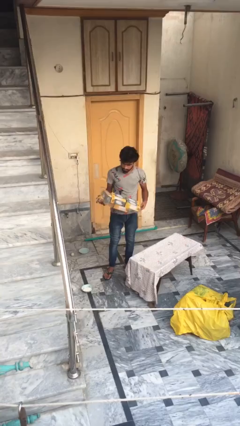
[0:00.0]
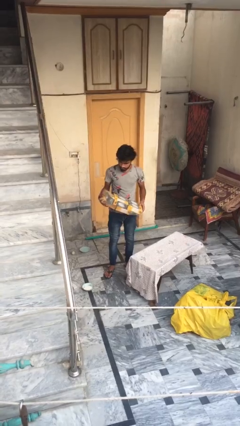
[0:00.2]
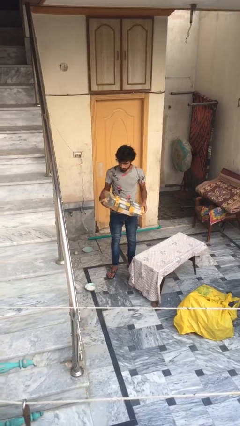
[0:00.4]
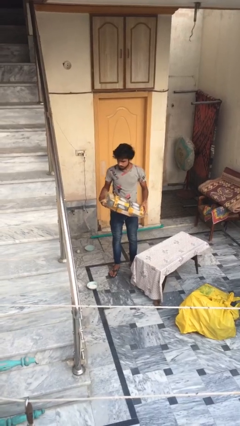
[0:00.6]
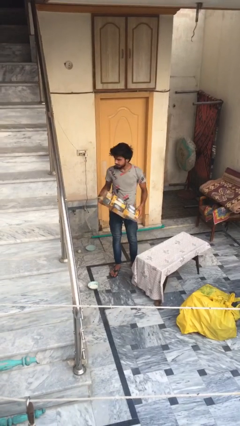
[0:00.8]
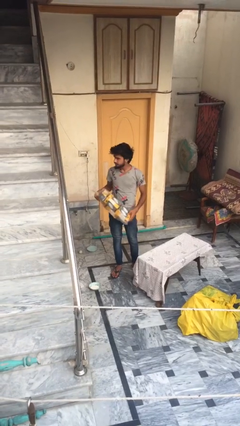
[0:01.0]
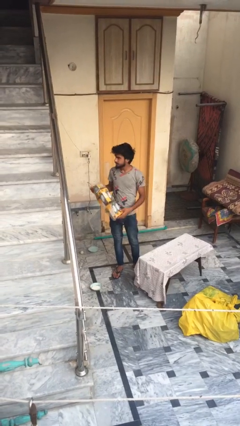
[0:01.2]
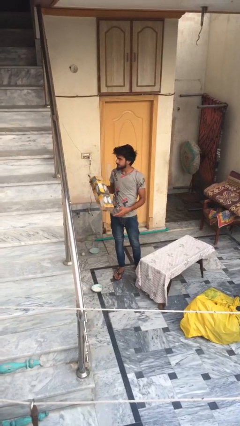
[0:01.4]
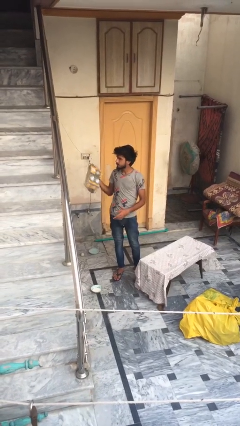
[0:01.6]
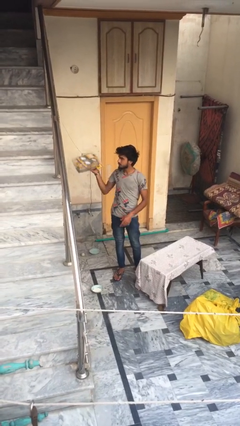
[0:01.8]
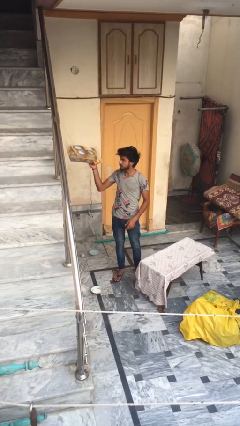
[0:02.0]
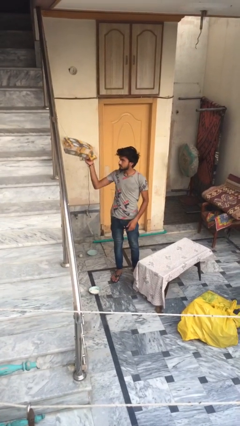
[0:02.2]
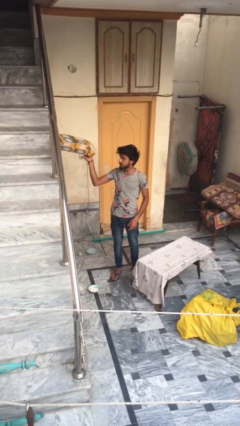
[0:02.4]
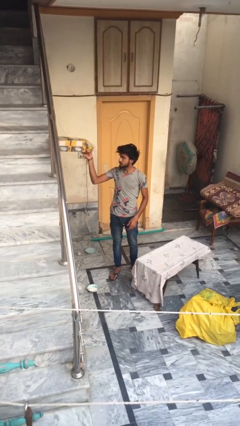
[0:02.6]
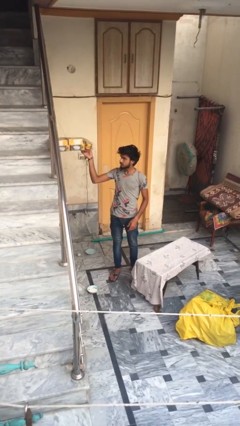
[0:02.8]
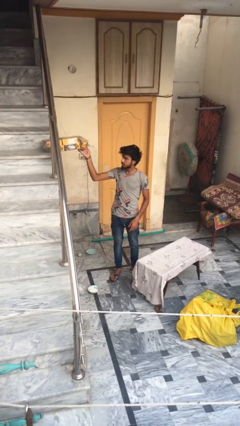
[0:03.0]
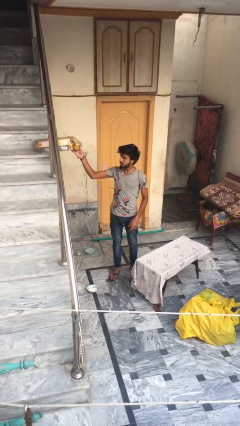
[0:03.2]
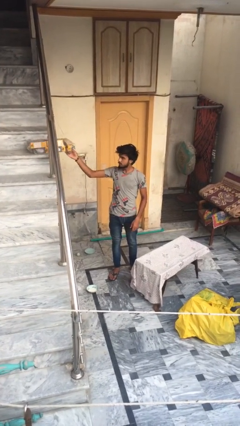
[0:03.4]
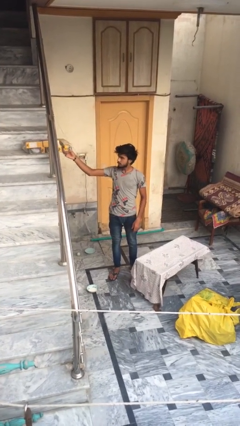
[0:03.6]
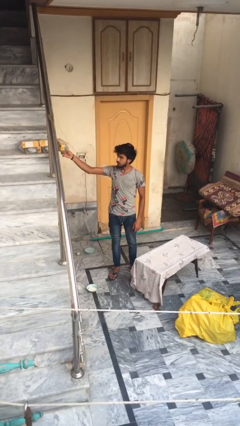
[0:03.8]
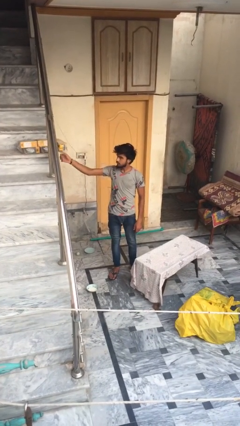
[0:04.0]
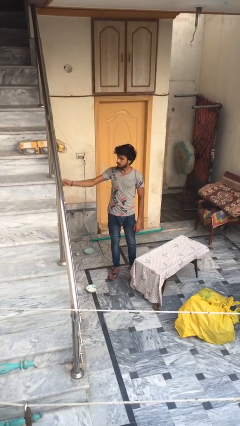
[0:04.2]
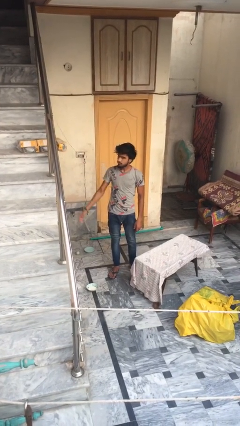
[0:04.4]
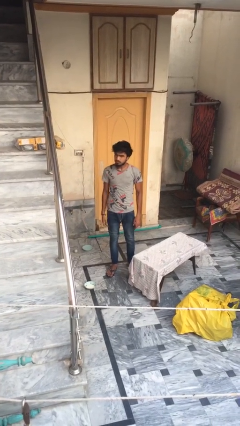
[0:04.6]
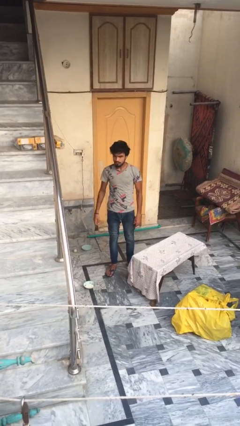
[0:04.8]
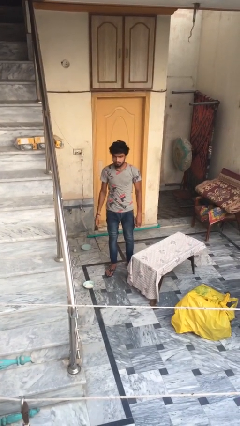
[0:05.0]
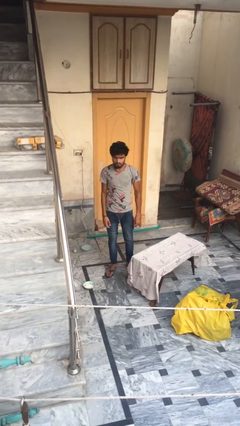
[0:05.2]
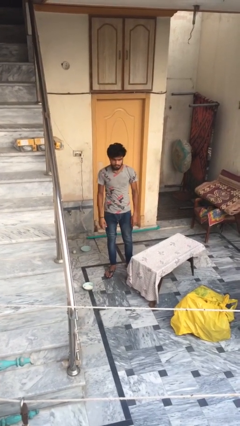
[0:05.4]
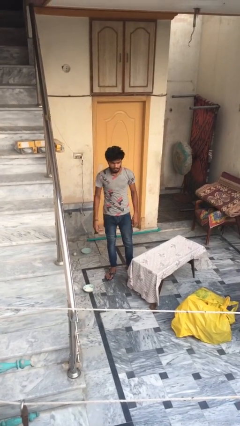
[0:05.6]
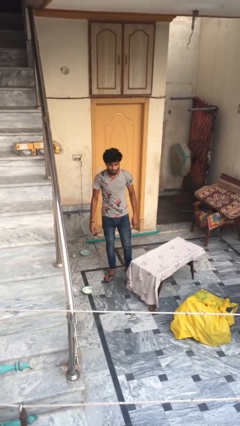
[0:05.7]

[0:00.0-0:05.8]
person puts down object on shelf

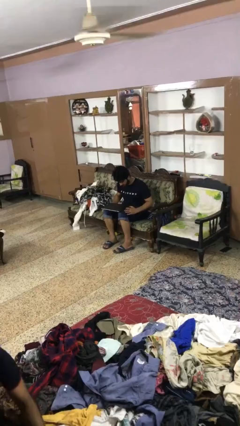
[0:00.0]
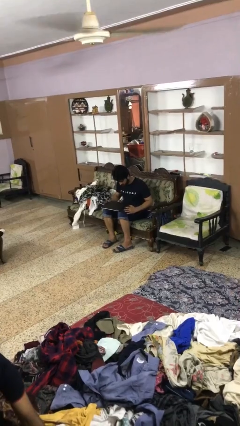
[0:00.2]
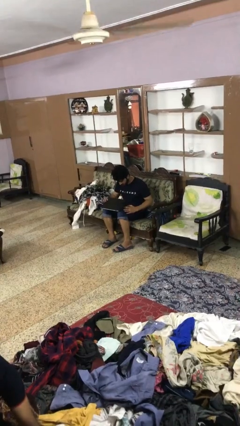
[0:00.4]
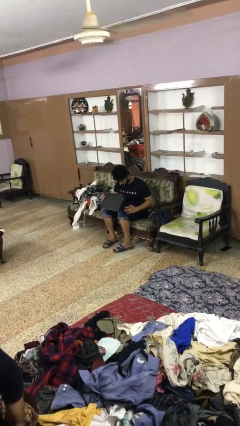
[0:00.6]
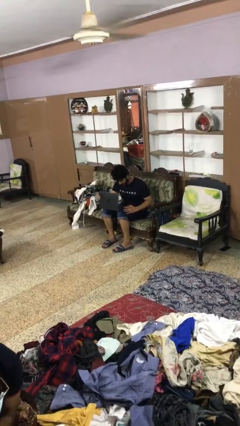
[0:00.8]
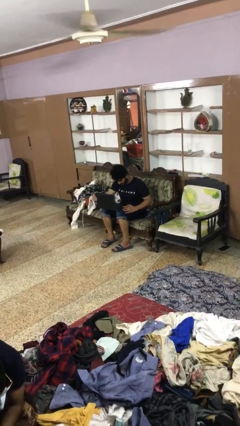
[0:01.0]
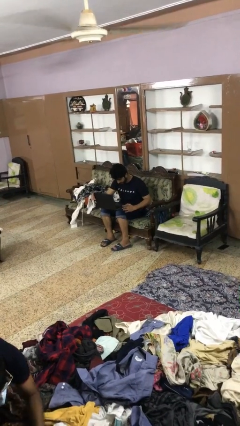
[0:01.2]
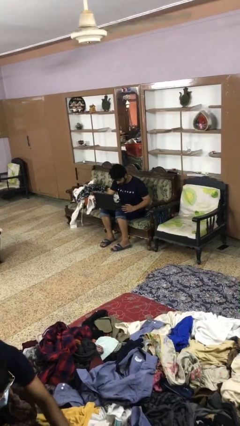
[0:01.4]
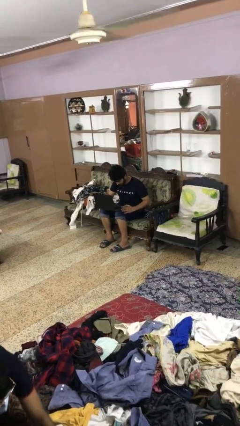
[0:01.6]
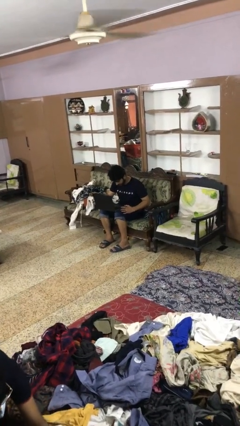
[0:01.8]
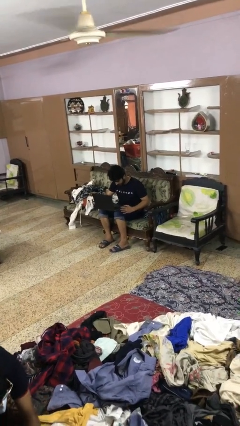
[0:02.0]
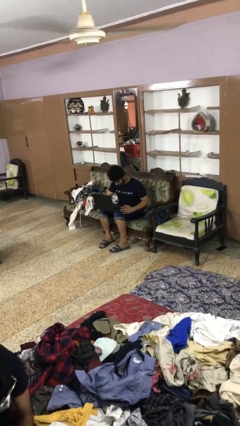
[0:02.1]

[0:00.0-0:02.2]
person opens laptop

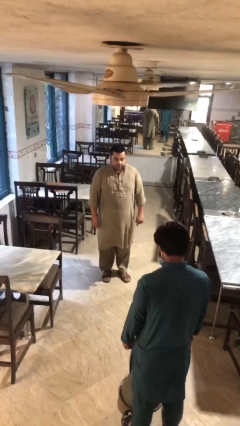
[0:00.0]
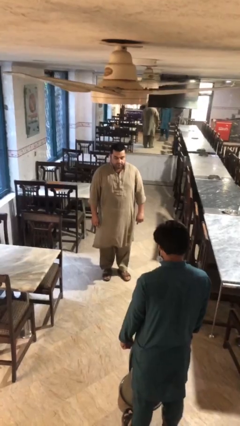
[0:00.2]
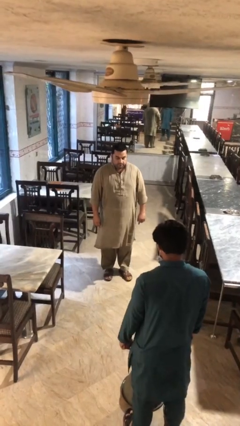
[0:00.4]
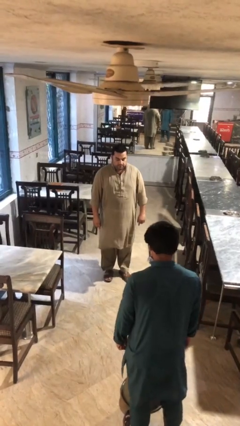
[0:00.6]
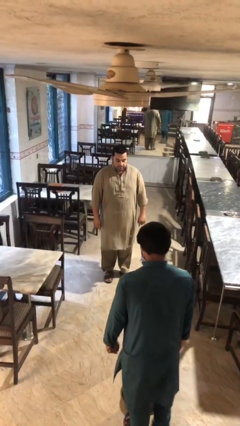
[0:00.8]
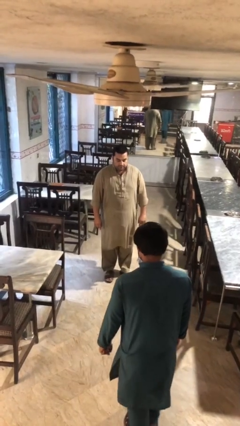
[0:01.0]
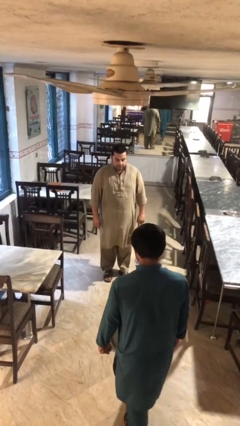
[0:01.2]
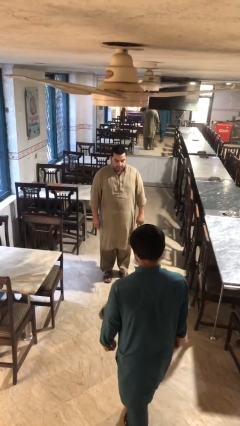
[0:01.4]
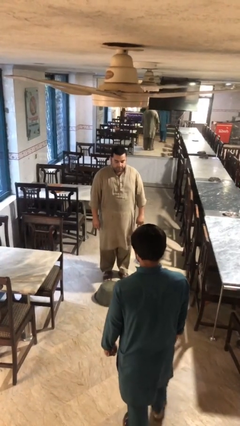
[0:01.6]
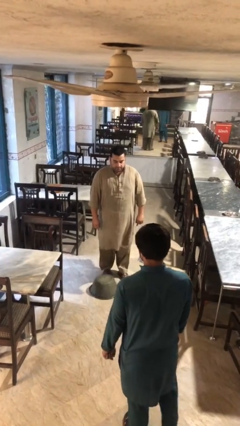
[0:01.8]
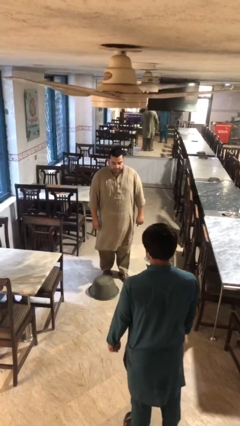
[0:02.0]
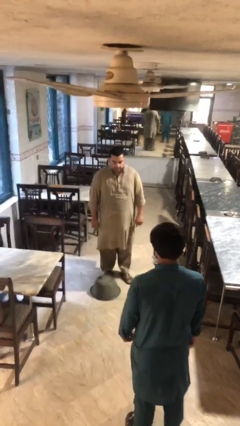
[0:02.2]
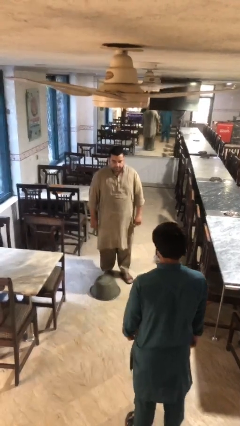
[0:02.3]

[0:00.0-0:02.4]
person kicks object to person

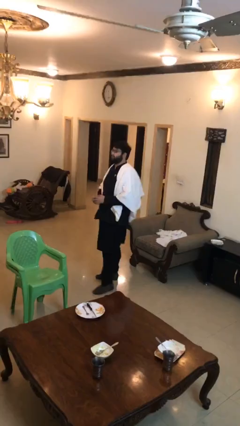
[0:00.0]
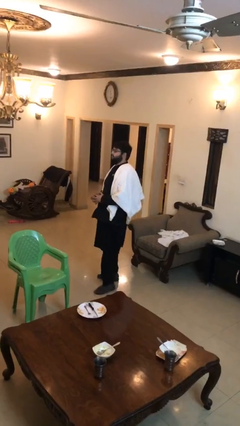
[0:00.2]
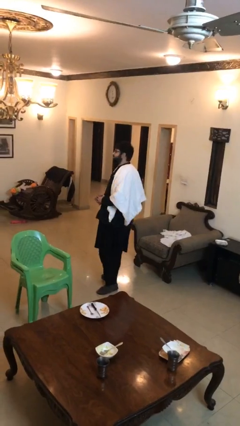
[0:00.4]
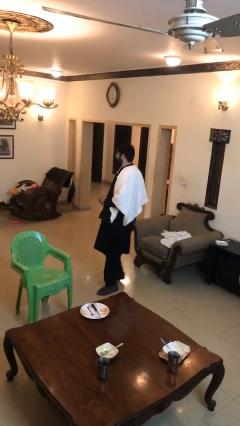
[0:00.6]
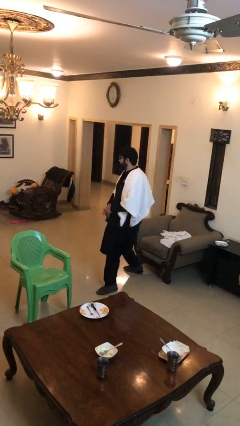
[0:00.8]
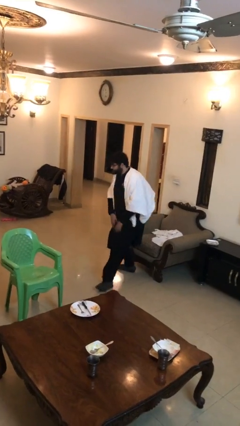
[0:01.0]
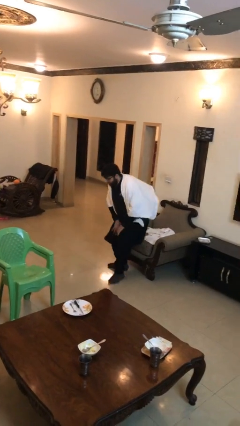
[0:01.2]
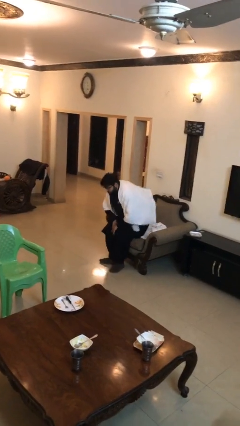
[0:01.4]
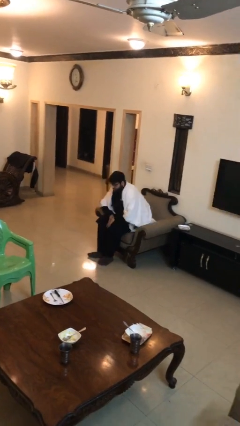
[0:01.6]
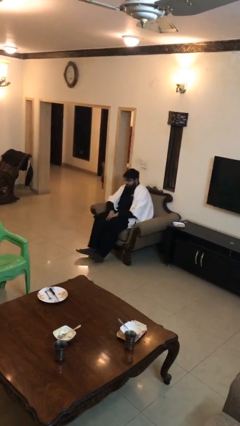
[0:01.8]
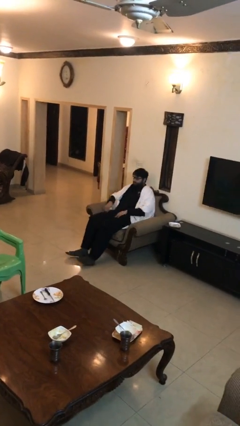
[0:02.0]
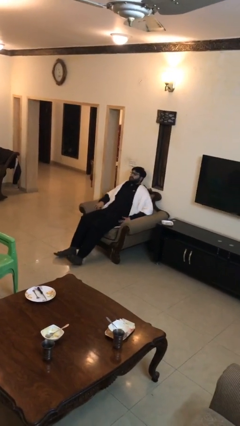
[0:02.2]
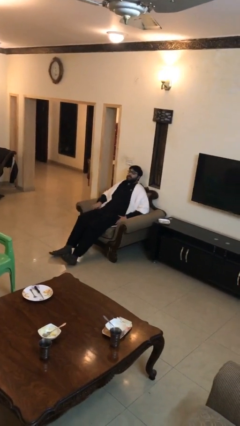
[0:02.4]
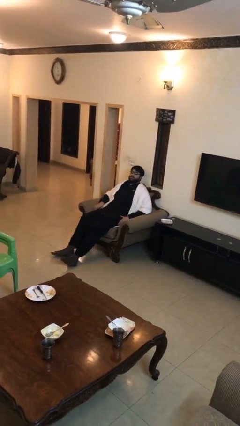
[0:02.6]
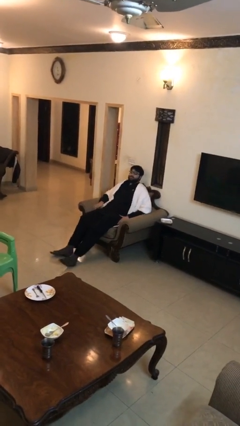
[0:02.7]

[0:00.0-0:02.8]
person sits down

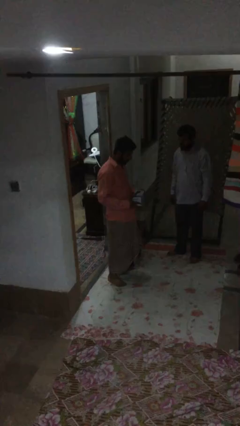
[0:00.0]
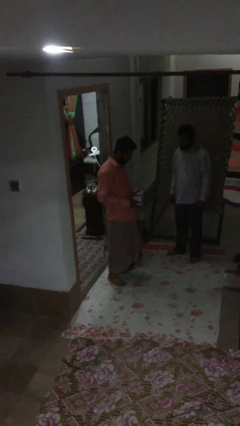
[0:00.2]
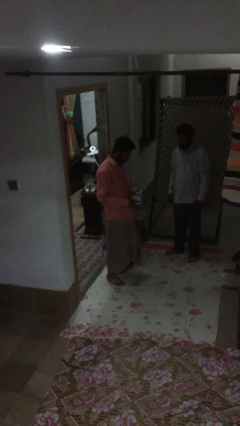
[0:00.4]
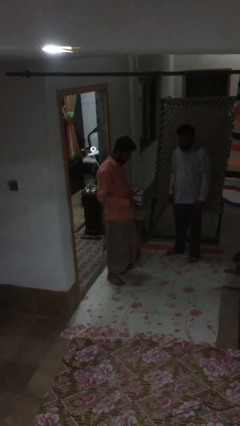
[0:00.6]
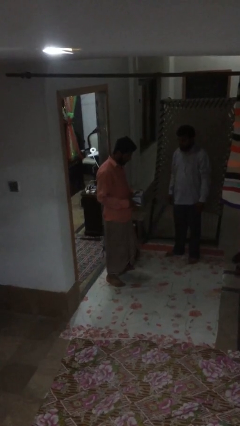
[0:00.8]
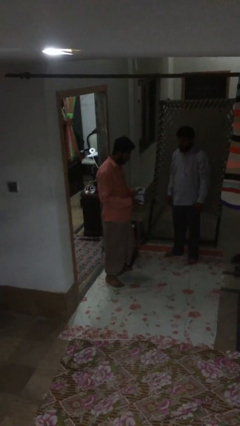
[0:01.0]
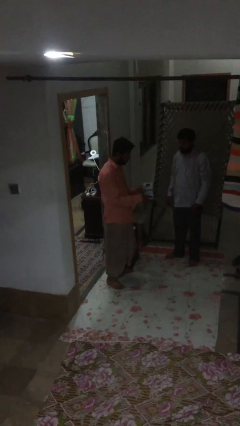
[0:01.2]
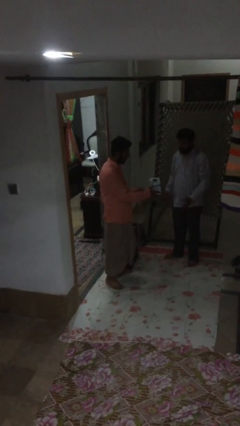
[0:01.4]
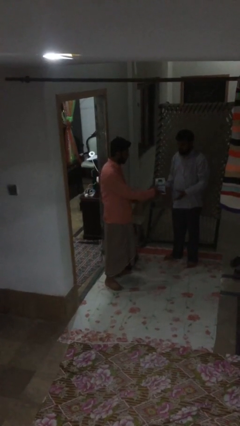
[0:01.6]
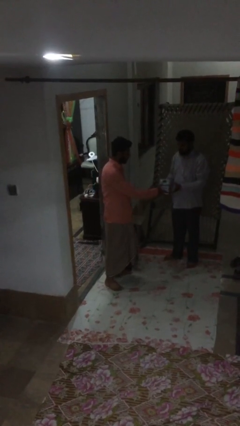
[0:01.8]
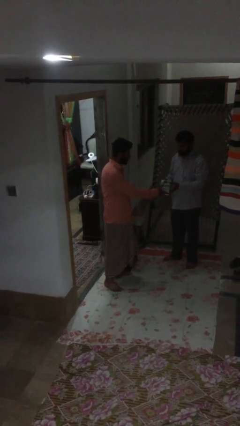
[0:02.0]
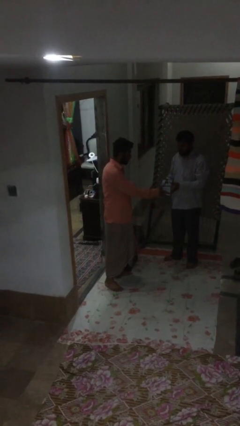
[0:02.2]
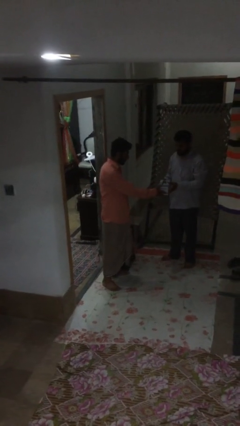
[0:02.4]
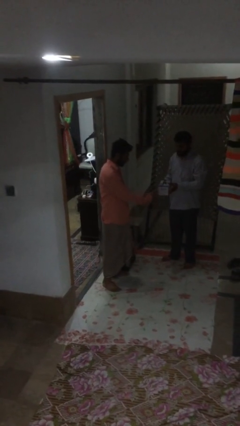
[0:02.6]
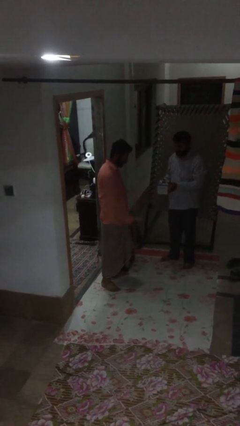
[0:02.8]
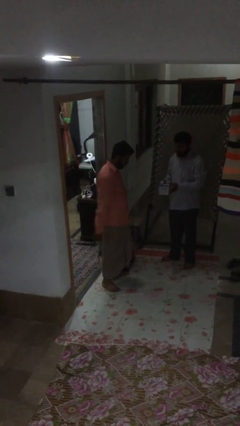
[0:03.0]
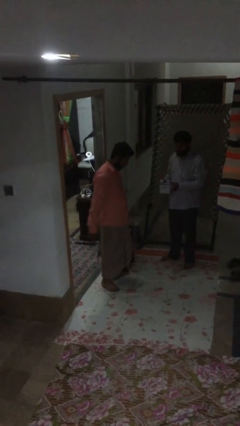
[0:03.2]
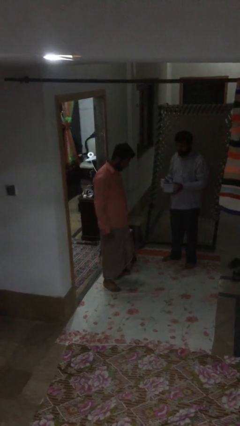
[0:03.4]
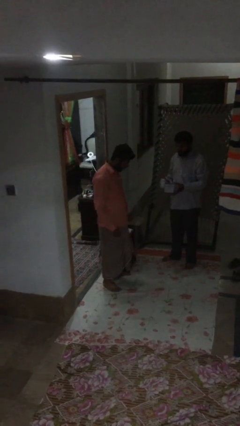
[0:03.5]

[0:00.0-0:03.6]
person transfers object to person

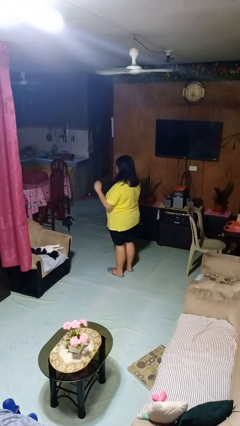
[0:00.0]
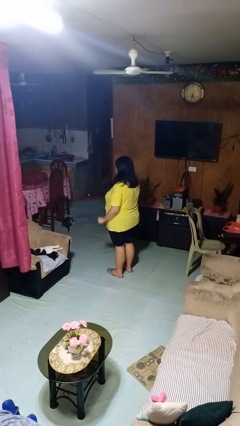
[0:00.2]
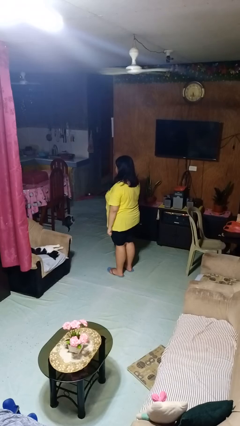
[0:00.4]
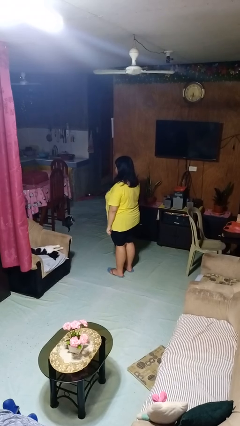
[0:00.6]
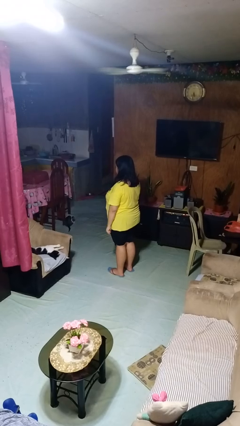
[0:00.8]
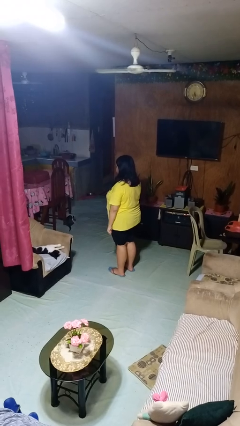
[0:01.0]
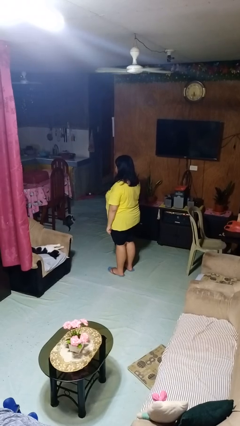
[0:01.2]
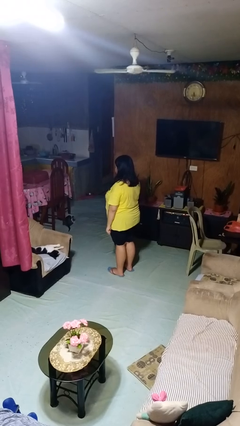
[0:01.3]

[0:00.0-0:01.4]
person gestures lower hand
